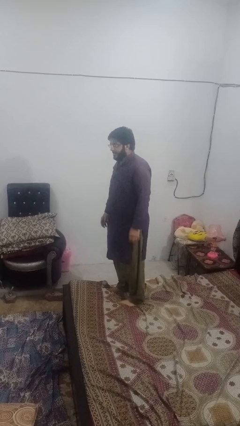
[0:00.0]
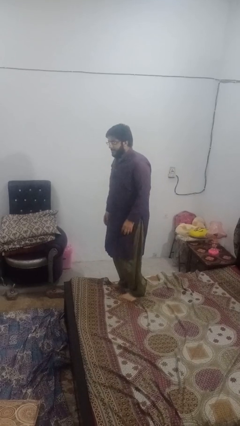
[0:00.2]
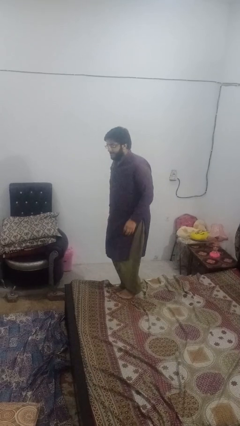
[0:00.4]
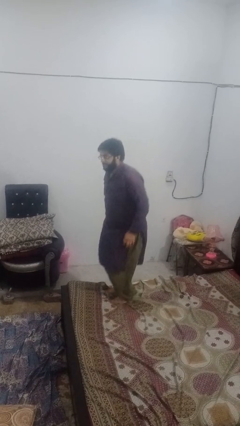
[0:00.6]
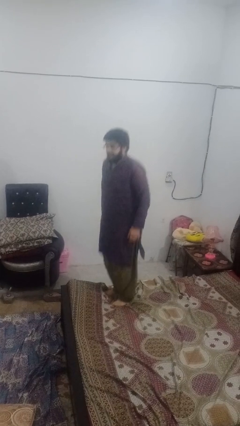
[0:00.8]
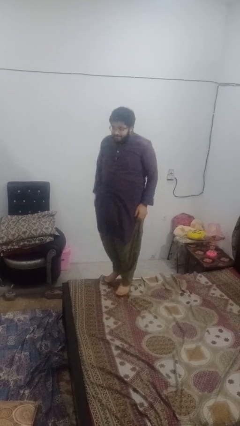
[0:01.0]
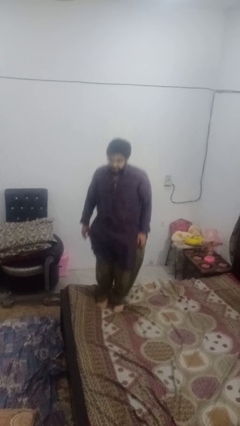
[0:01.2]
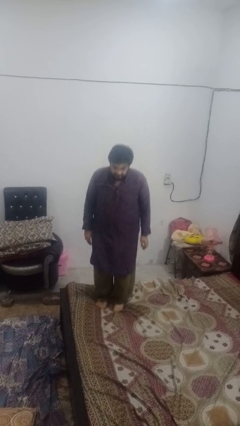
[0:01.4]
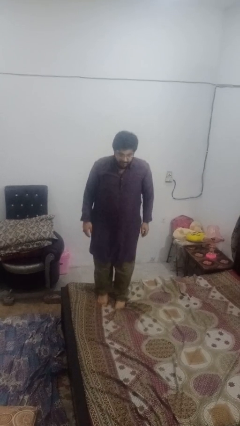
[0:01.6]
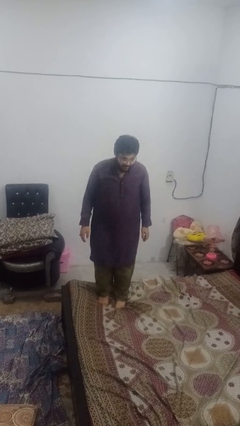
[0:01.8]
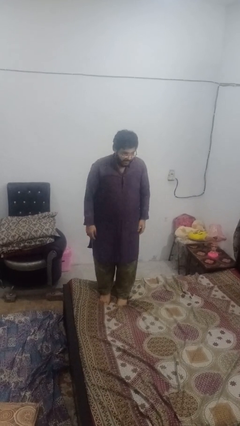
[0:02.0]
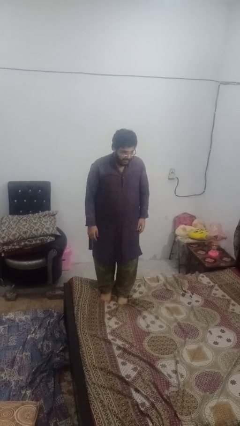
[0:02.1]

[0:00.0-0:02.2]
person jumps on bed

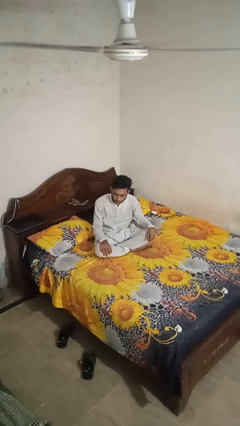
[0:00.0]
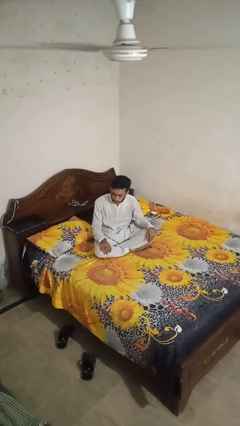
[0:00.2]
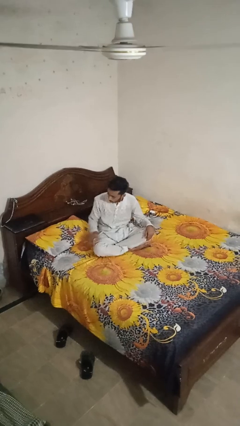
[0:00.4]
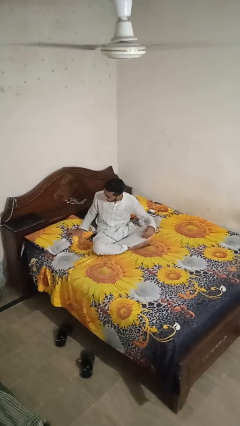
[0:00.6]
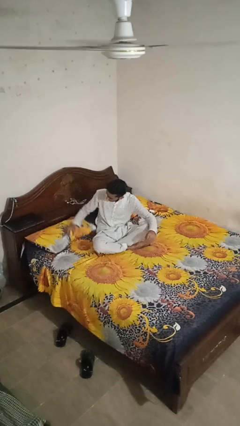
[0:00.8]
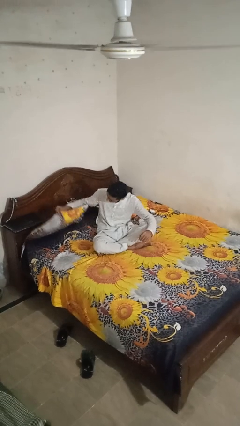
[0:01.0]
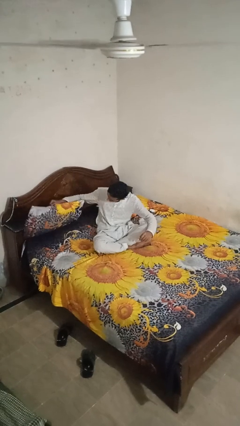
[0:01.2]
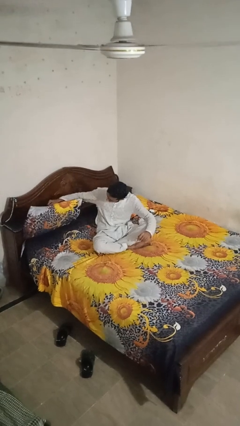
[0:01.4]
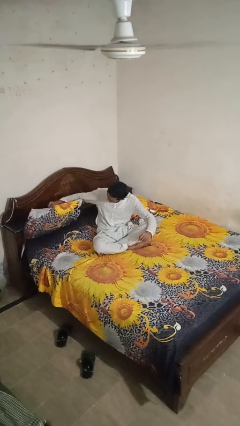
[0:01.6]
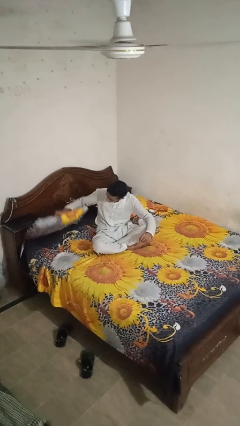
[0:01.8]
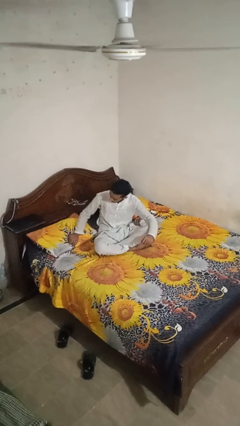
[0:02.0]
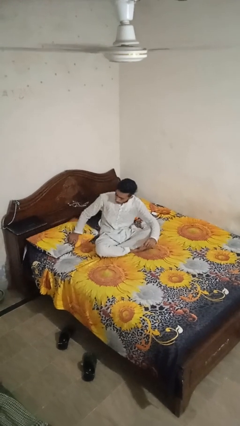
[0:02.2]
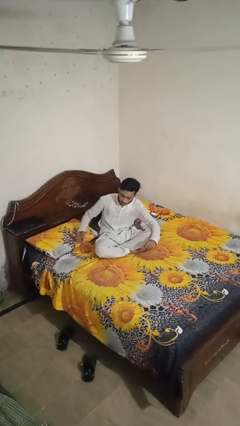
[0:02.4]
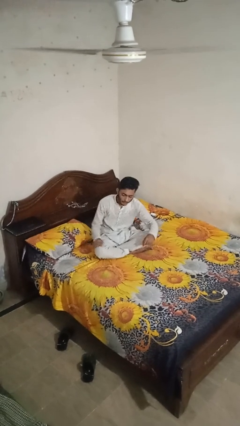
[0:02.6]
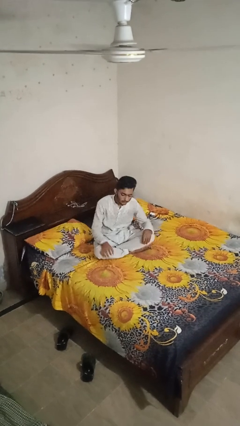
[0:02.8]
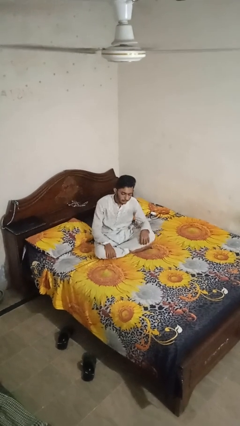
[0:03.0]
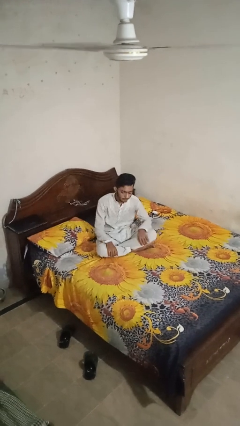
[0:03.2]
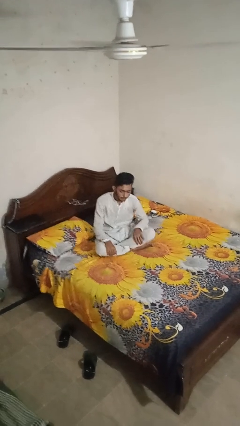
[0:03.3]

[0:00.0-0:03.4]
person searches under bed

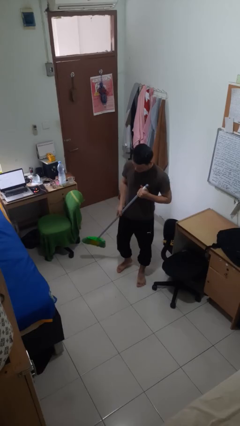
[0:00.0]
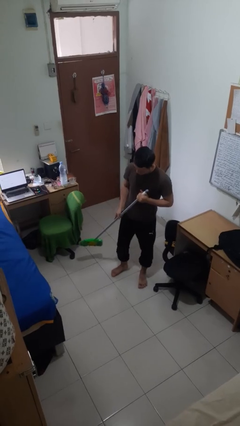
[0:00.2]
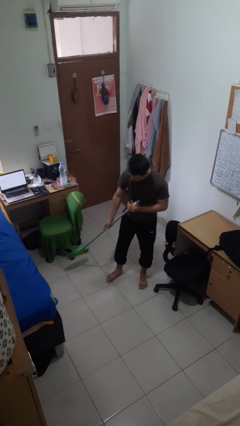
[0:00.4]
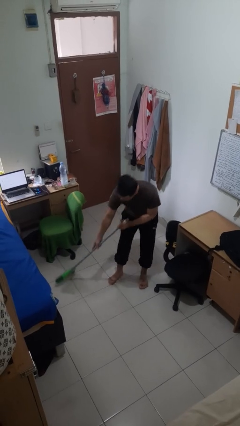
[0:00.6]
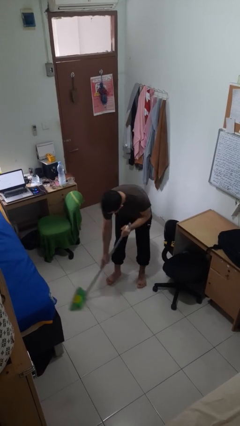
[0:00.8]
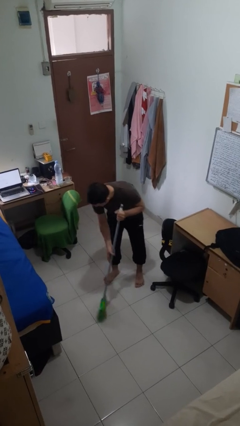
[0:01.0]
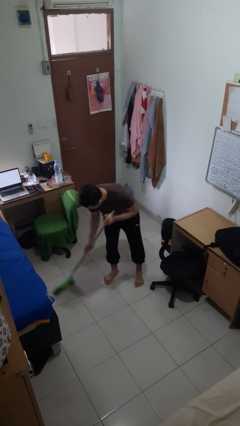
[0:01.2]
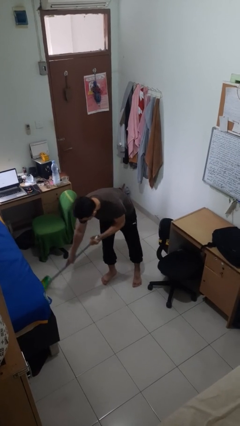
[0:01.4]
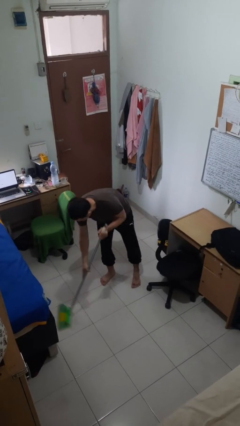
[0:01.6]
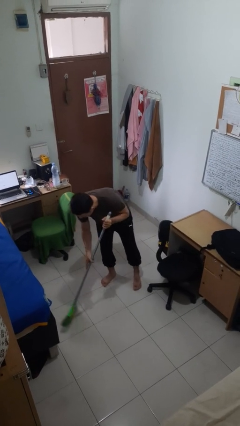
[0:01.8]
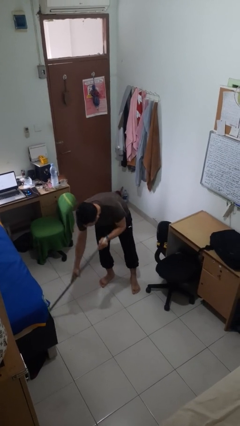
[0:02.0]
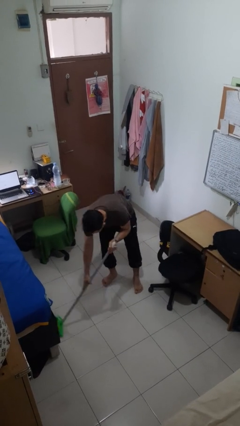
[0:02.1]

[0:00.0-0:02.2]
person sweeps floor

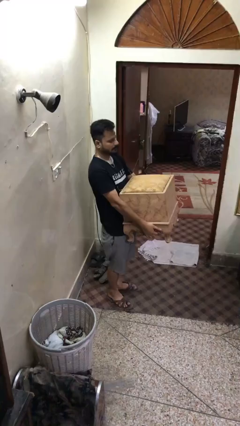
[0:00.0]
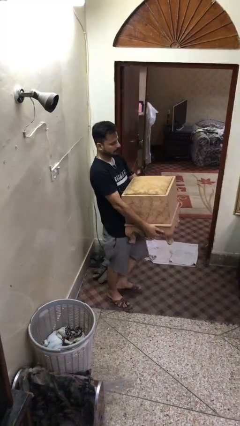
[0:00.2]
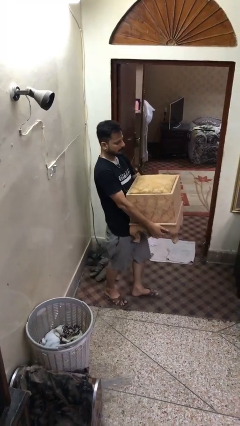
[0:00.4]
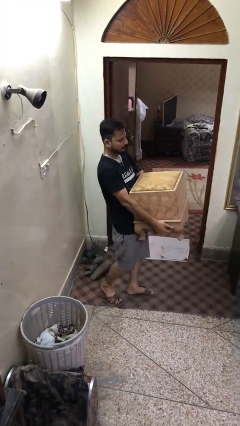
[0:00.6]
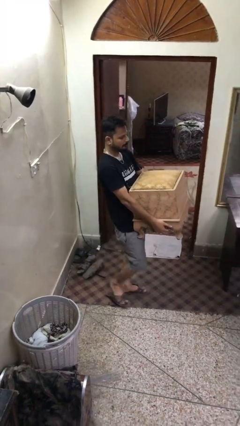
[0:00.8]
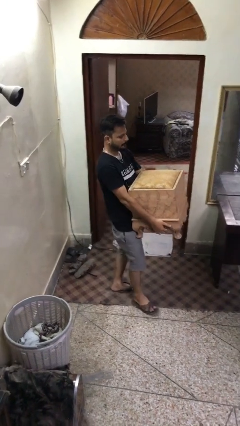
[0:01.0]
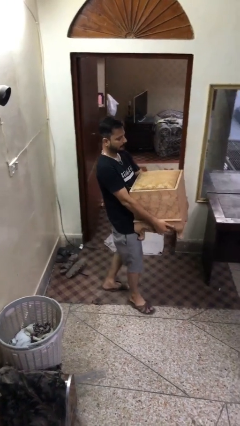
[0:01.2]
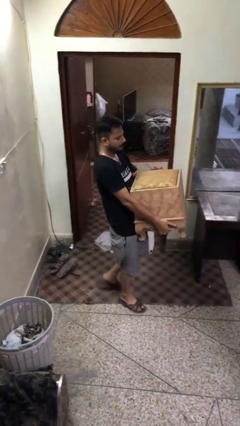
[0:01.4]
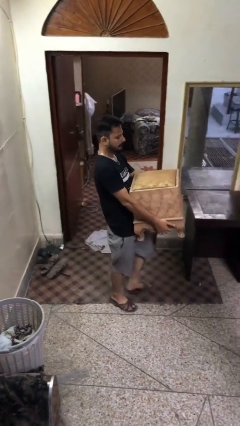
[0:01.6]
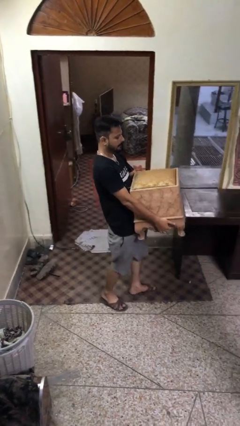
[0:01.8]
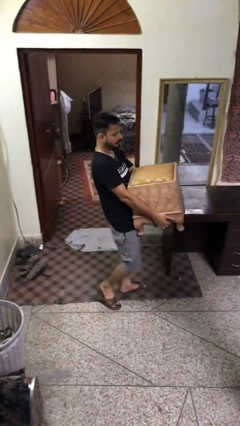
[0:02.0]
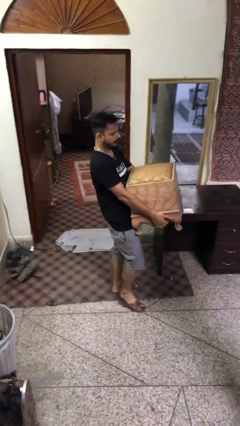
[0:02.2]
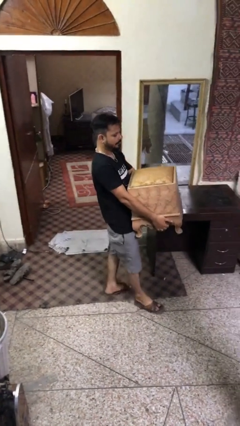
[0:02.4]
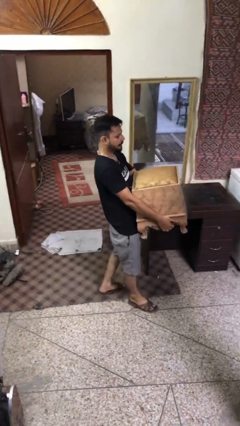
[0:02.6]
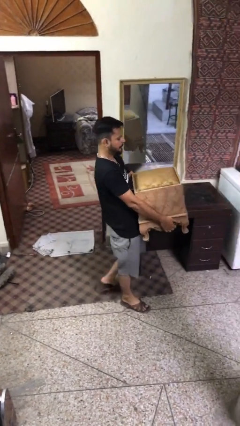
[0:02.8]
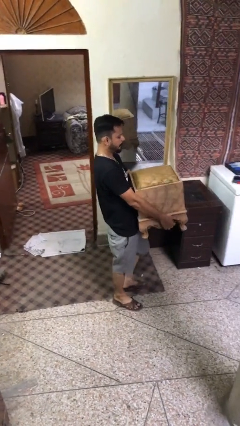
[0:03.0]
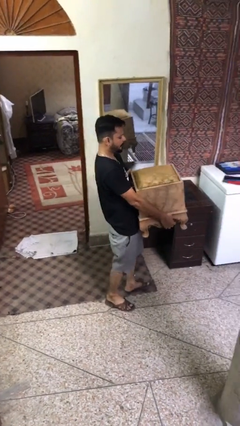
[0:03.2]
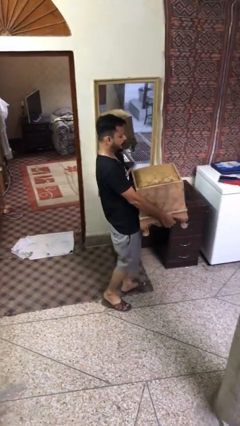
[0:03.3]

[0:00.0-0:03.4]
person carries heavy object

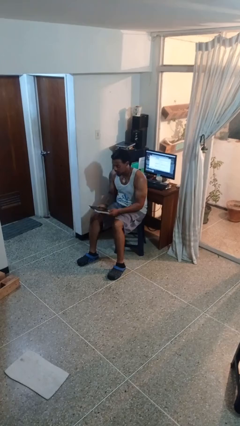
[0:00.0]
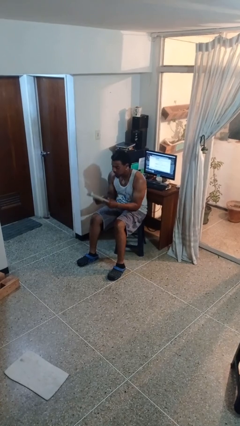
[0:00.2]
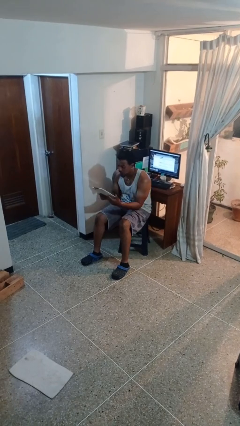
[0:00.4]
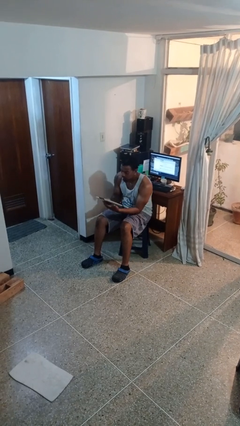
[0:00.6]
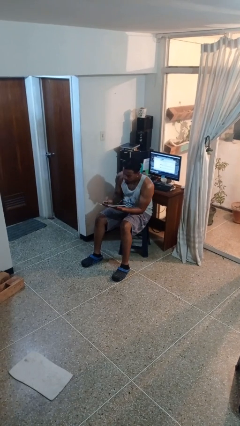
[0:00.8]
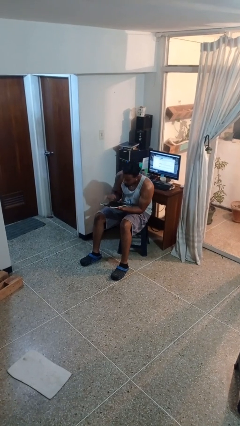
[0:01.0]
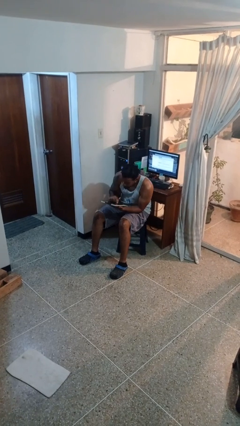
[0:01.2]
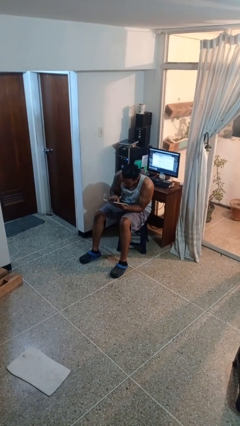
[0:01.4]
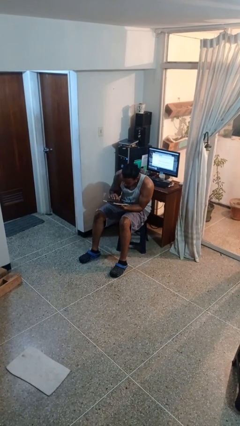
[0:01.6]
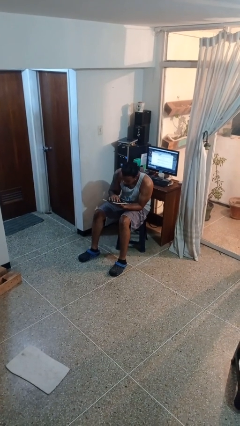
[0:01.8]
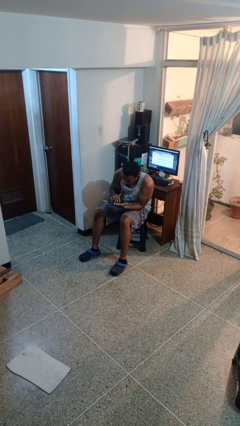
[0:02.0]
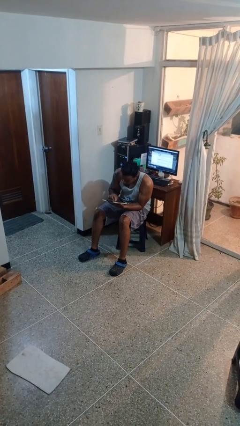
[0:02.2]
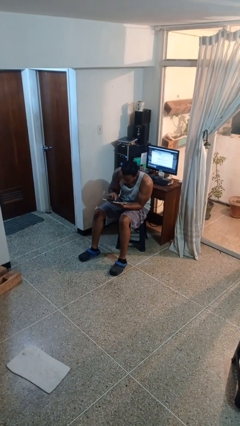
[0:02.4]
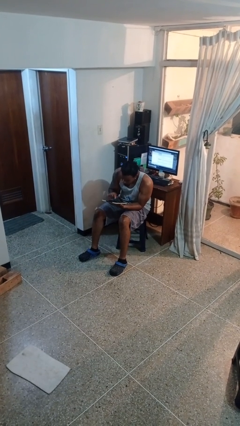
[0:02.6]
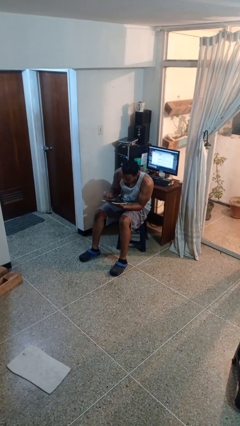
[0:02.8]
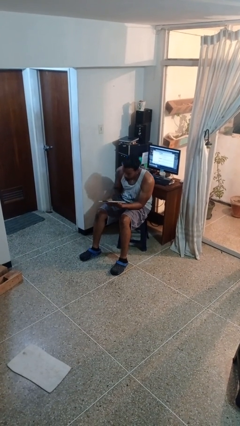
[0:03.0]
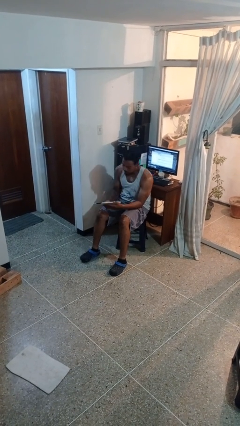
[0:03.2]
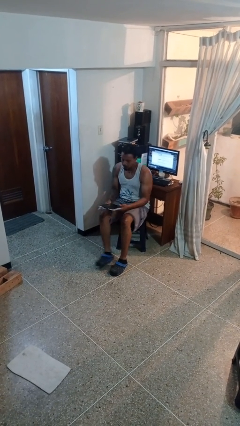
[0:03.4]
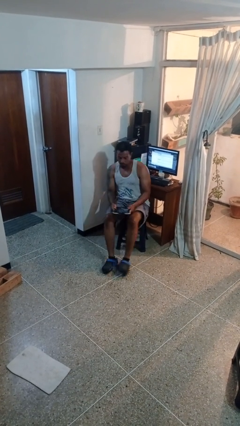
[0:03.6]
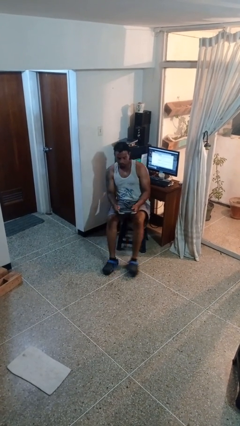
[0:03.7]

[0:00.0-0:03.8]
person interacts with tablet

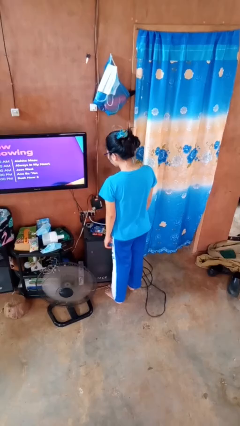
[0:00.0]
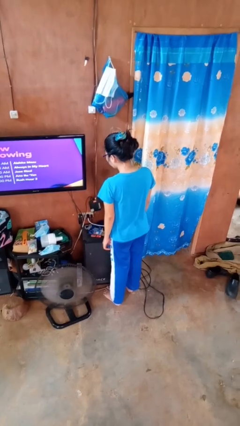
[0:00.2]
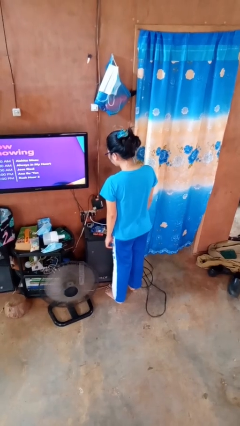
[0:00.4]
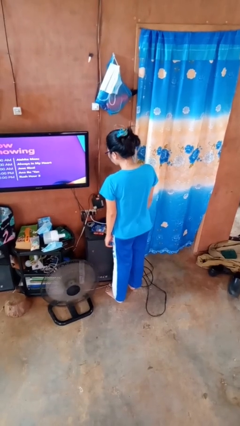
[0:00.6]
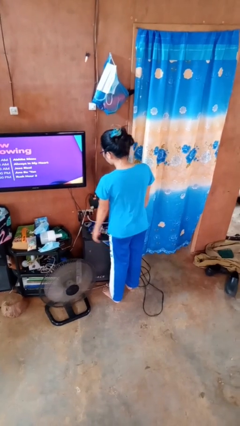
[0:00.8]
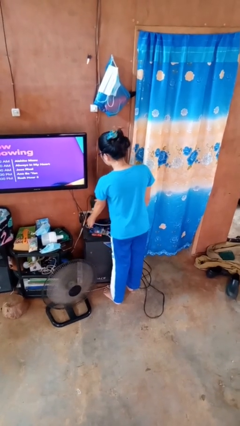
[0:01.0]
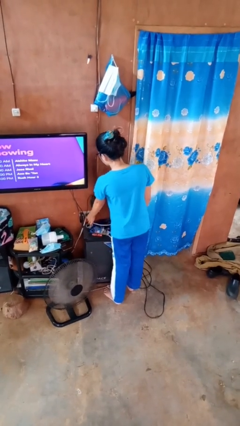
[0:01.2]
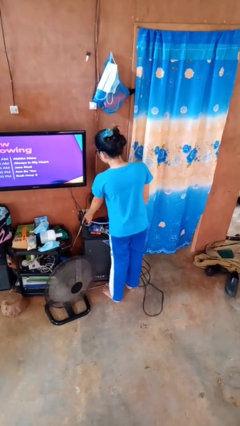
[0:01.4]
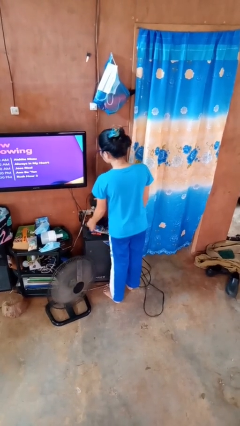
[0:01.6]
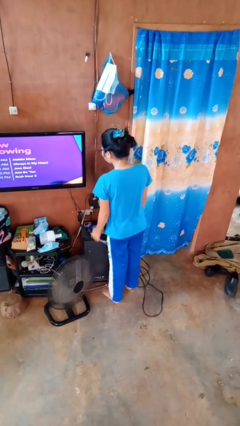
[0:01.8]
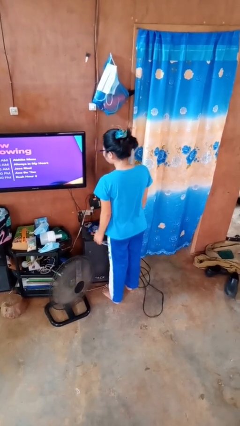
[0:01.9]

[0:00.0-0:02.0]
person unplugs from electrical socket

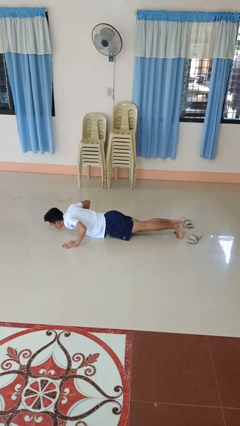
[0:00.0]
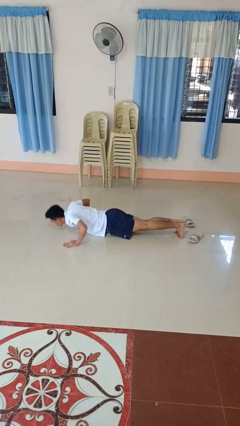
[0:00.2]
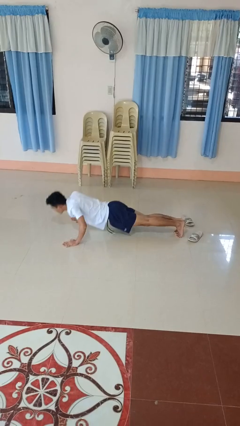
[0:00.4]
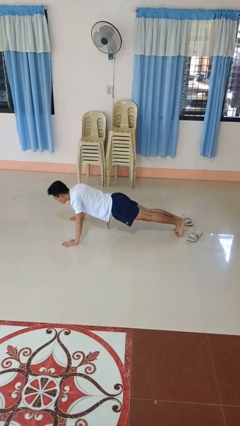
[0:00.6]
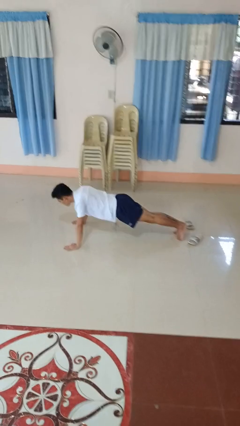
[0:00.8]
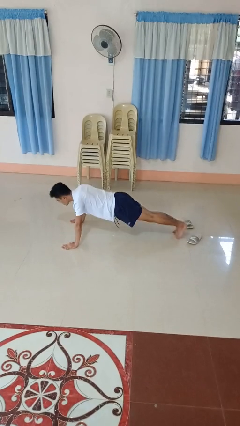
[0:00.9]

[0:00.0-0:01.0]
person exercises with pushup
